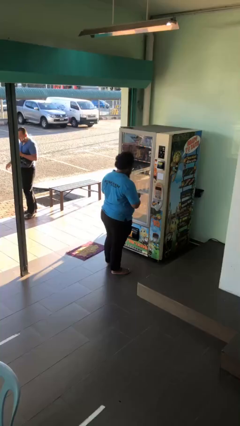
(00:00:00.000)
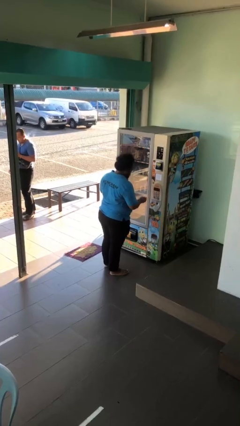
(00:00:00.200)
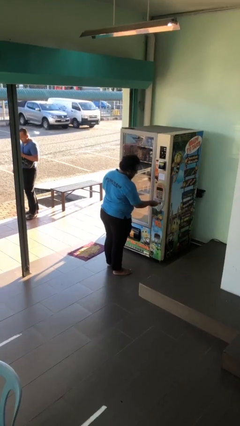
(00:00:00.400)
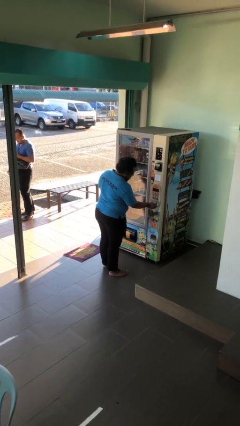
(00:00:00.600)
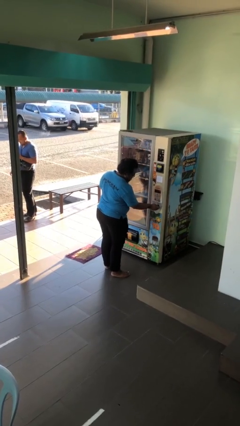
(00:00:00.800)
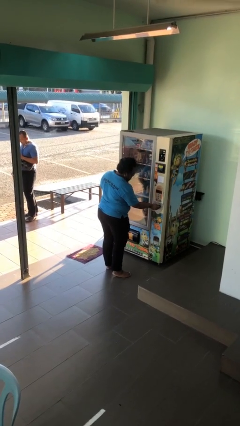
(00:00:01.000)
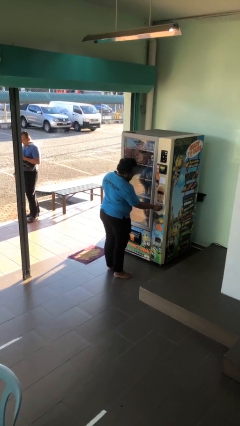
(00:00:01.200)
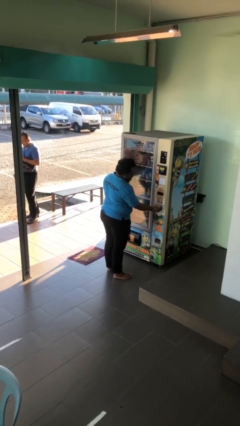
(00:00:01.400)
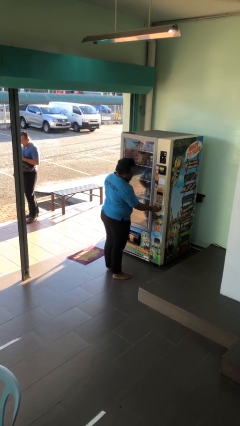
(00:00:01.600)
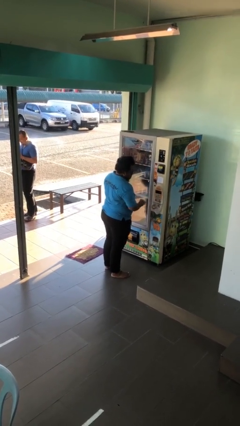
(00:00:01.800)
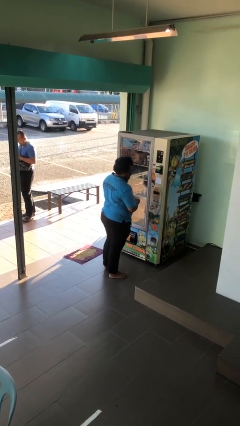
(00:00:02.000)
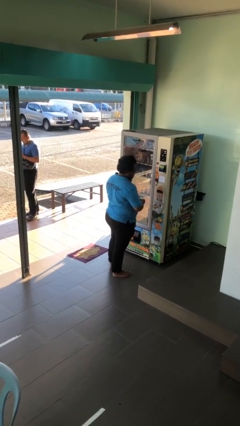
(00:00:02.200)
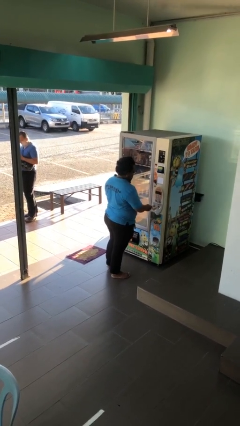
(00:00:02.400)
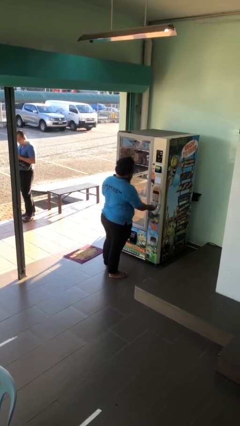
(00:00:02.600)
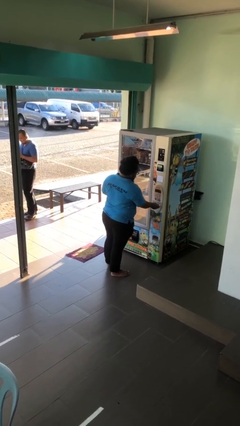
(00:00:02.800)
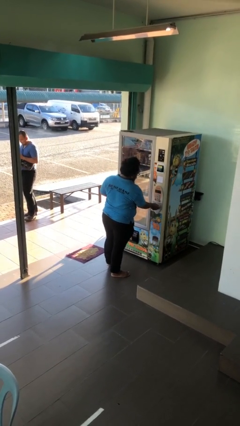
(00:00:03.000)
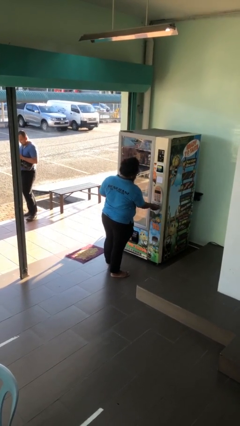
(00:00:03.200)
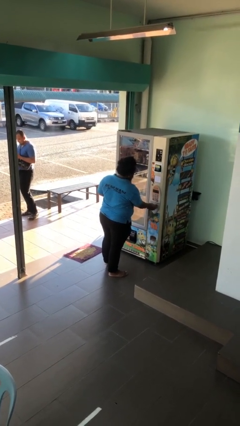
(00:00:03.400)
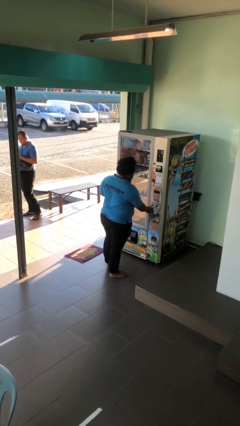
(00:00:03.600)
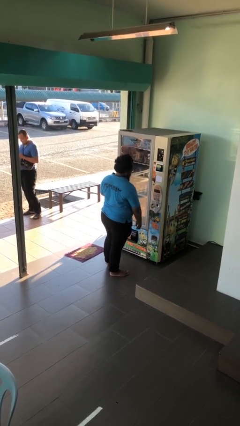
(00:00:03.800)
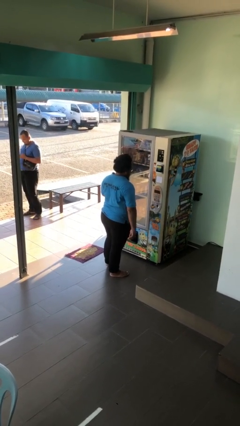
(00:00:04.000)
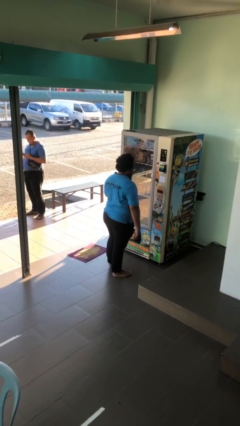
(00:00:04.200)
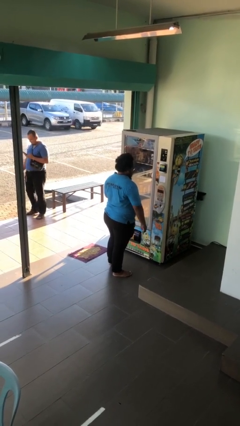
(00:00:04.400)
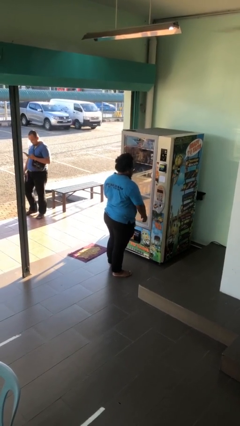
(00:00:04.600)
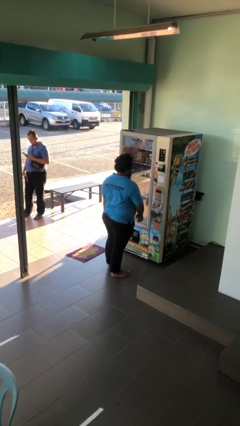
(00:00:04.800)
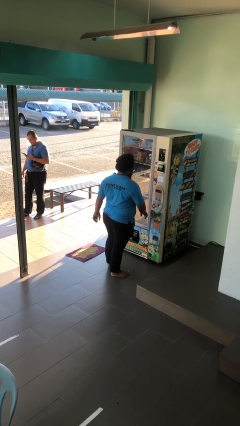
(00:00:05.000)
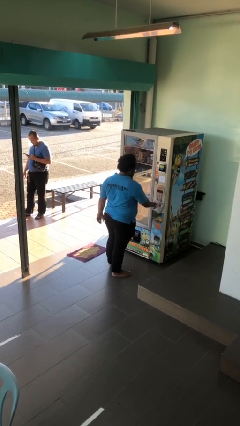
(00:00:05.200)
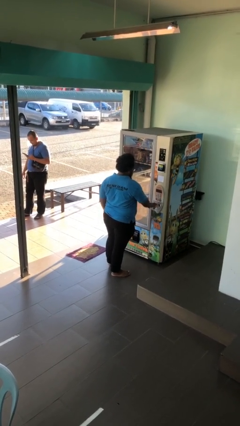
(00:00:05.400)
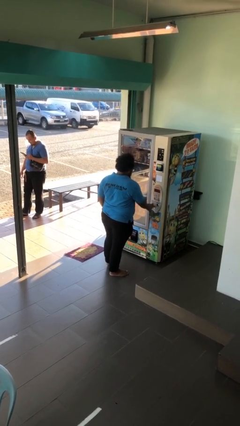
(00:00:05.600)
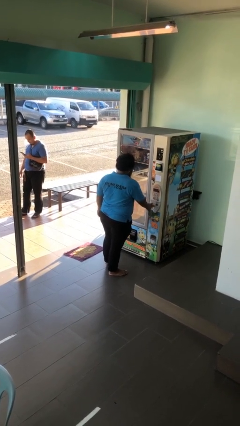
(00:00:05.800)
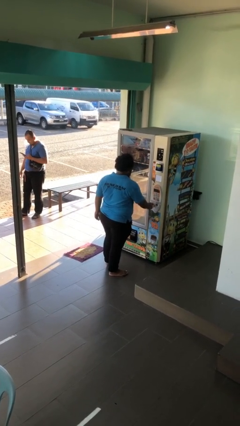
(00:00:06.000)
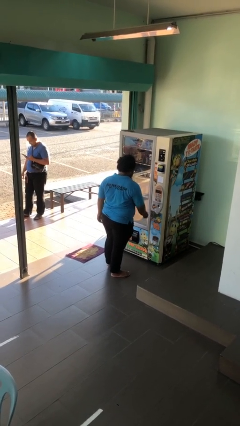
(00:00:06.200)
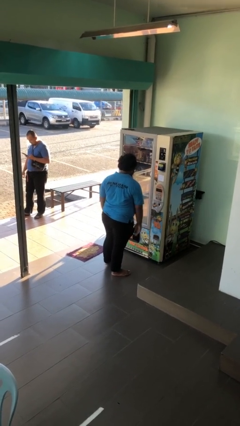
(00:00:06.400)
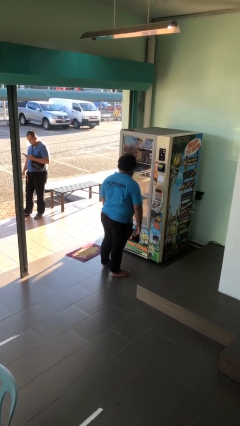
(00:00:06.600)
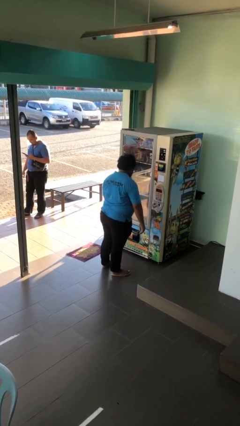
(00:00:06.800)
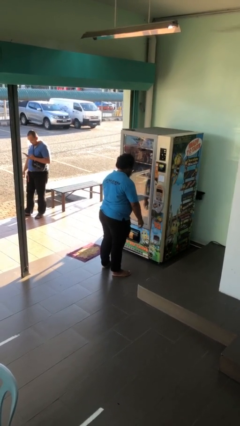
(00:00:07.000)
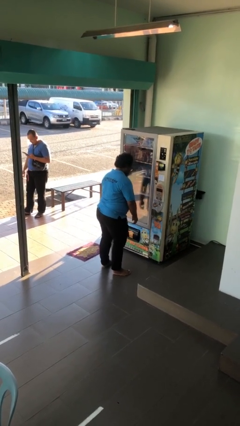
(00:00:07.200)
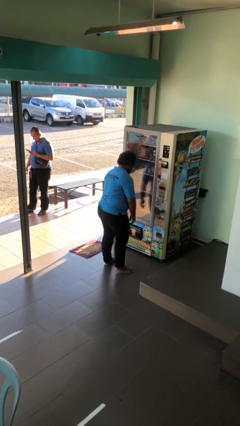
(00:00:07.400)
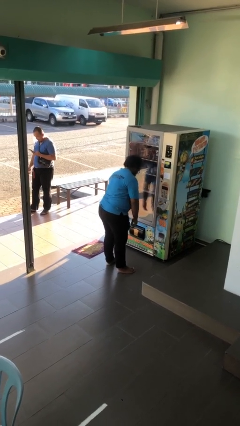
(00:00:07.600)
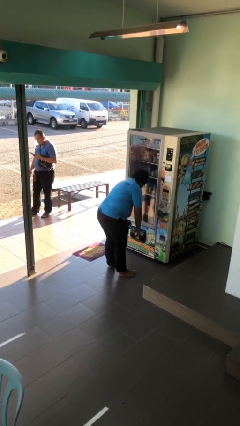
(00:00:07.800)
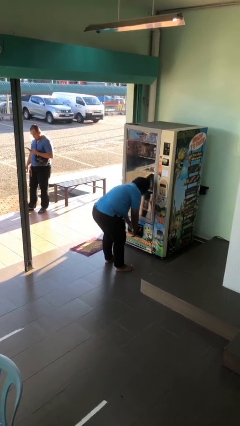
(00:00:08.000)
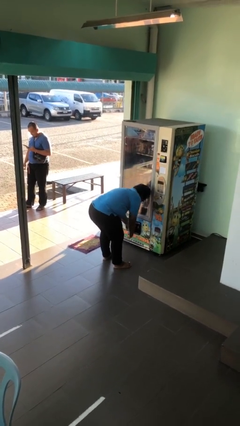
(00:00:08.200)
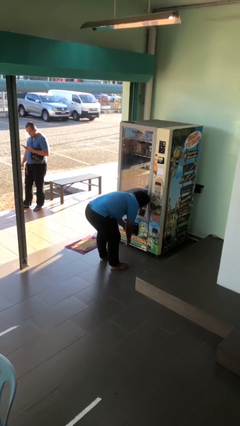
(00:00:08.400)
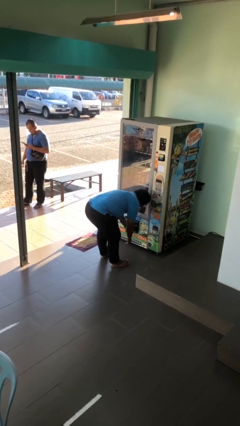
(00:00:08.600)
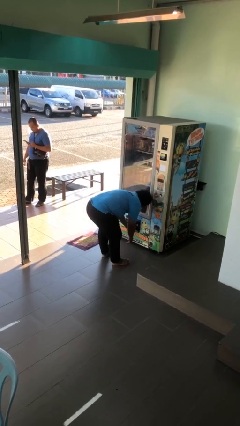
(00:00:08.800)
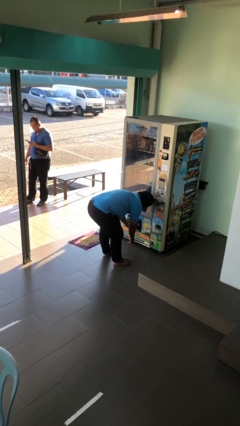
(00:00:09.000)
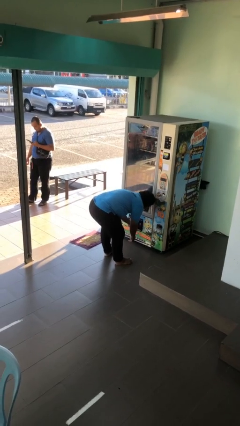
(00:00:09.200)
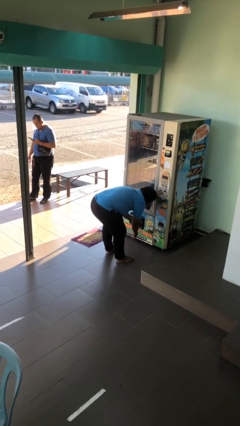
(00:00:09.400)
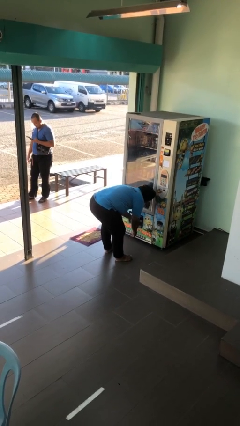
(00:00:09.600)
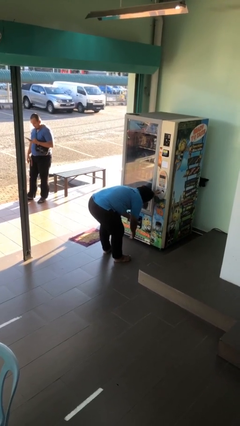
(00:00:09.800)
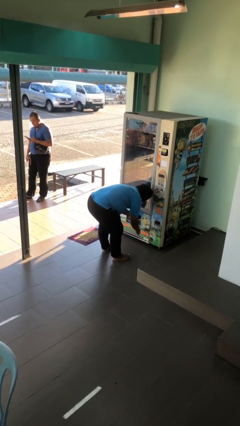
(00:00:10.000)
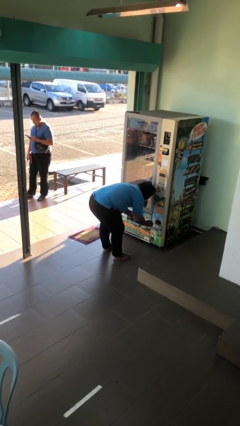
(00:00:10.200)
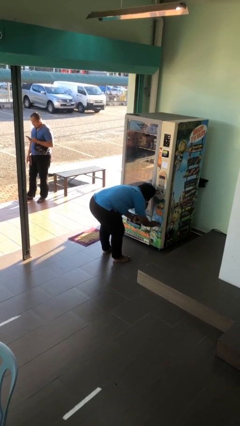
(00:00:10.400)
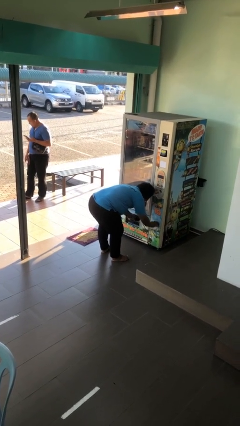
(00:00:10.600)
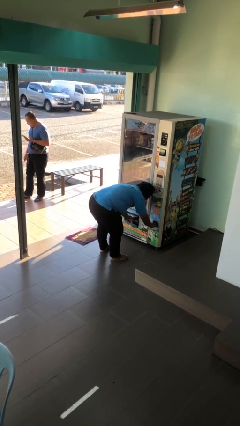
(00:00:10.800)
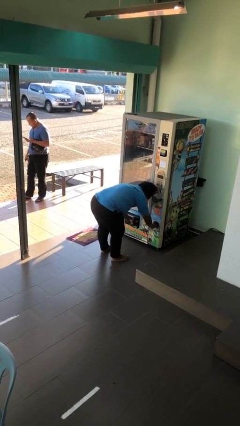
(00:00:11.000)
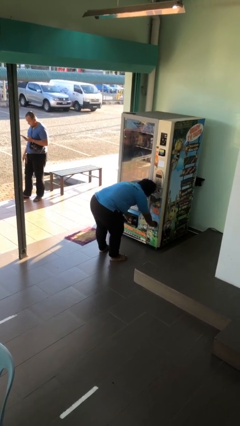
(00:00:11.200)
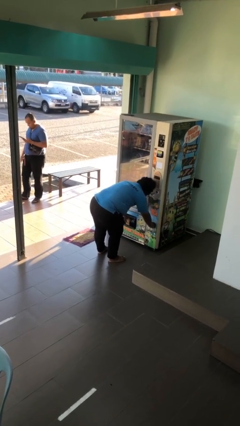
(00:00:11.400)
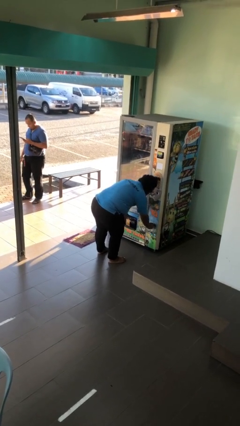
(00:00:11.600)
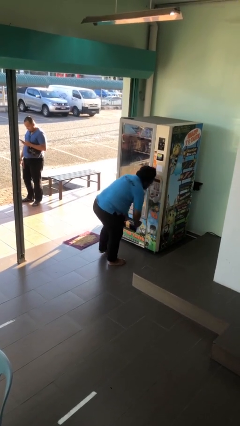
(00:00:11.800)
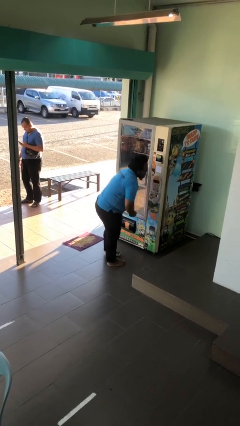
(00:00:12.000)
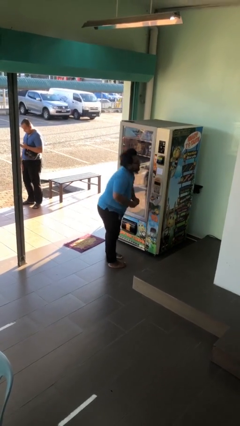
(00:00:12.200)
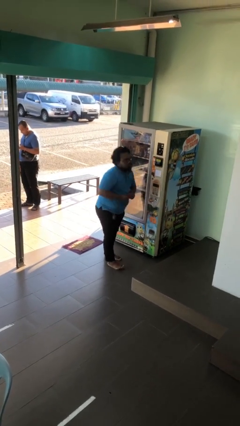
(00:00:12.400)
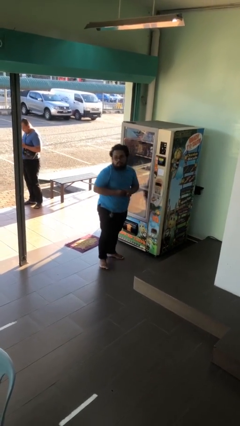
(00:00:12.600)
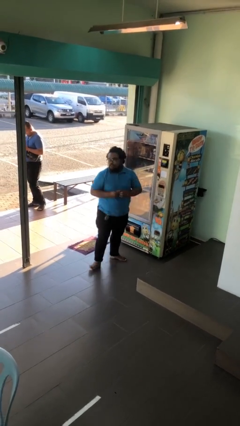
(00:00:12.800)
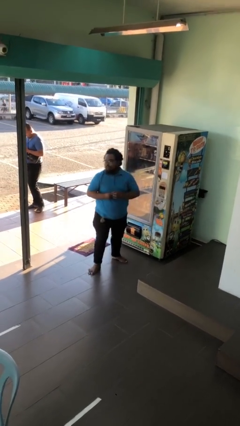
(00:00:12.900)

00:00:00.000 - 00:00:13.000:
person purchases from machine

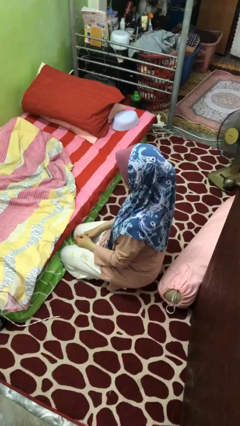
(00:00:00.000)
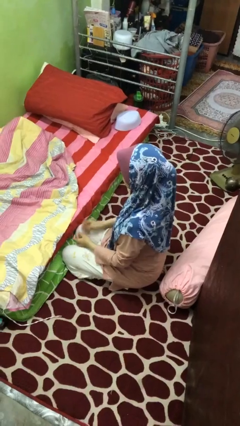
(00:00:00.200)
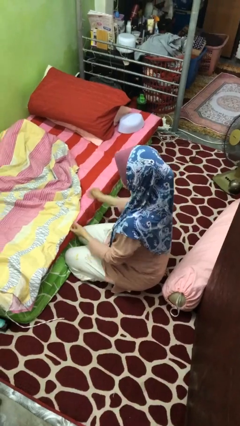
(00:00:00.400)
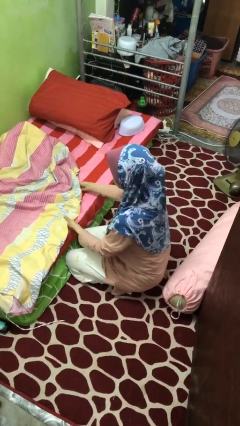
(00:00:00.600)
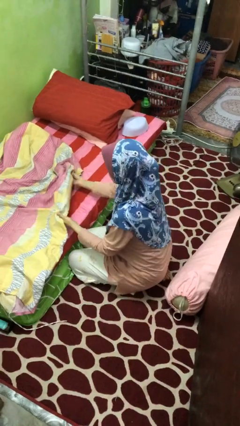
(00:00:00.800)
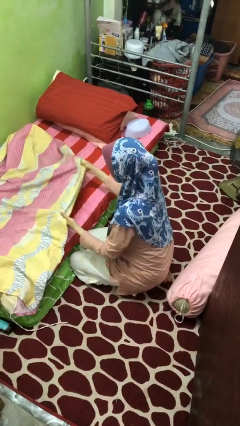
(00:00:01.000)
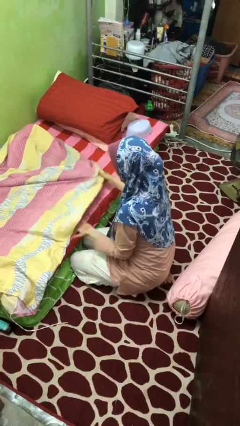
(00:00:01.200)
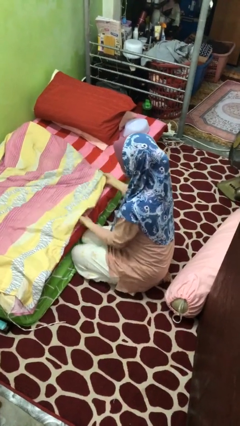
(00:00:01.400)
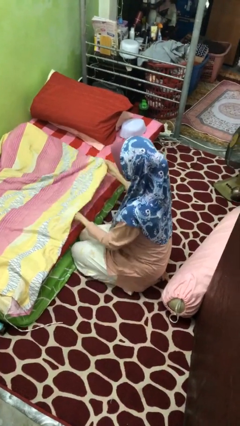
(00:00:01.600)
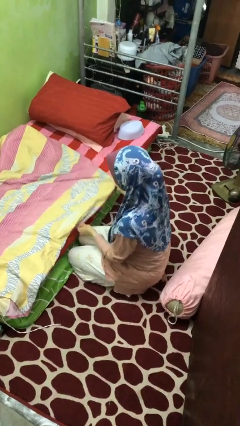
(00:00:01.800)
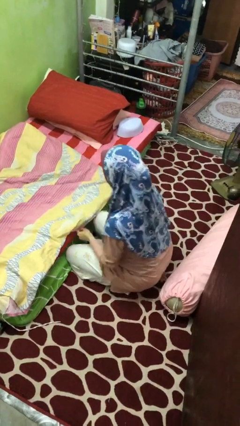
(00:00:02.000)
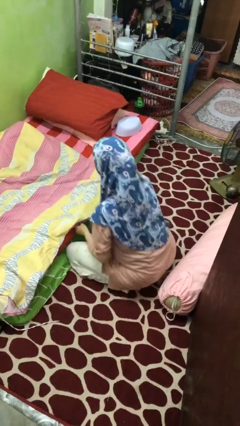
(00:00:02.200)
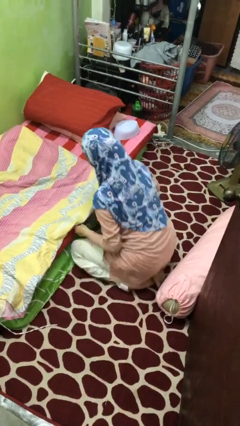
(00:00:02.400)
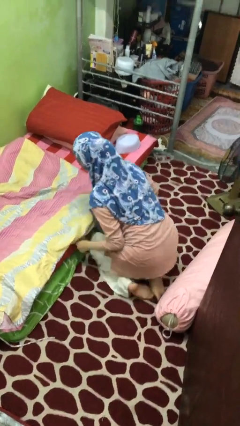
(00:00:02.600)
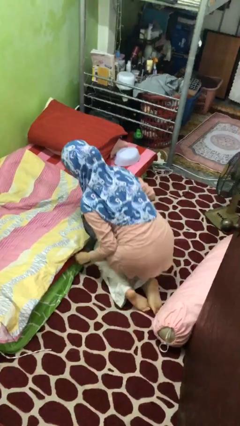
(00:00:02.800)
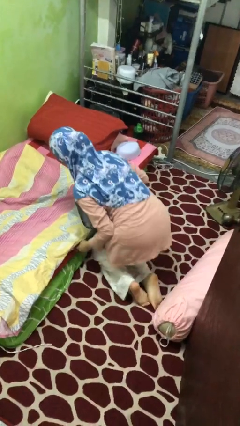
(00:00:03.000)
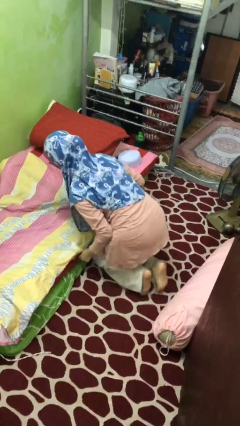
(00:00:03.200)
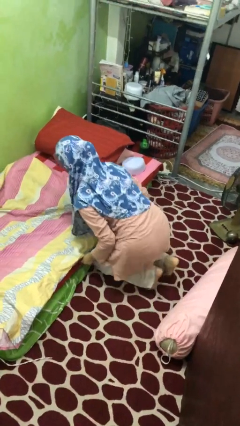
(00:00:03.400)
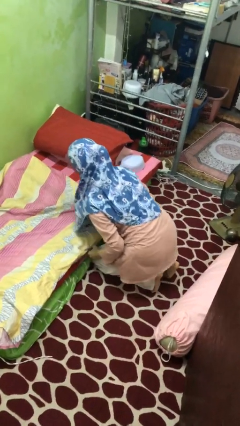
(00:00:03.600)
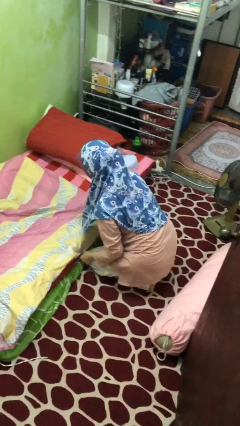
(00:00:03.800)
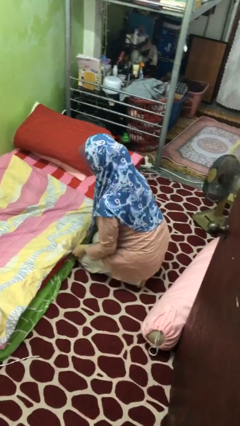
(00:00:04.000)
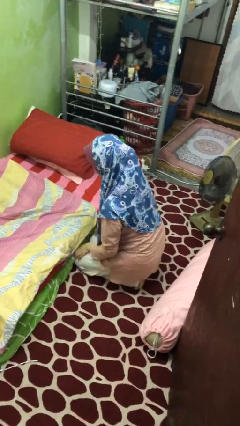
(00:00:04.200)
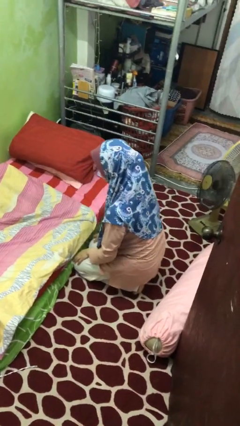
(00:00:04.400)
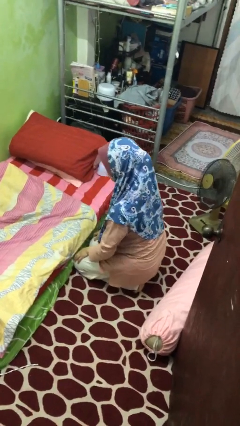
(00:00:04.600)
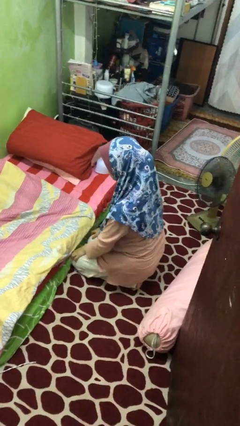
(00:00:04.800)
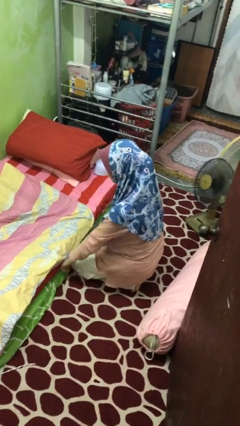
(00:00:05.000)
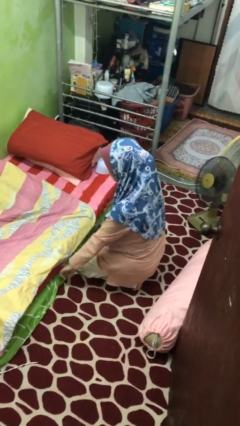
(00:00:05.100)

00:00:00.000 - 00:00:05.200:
person makes bed
